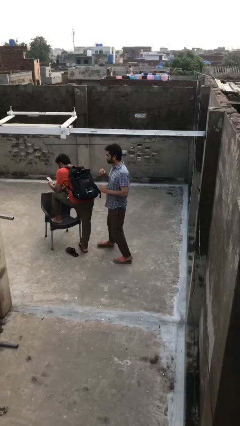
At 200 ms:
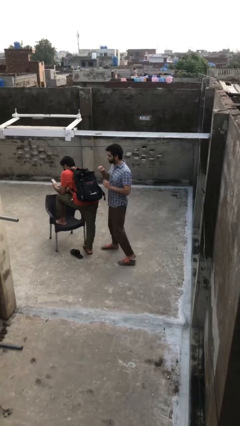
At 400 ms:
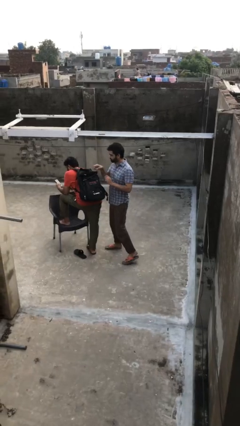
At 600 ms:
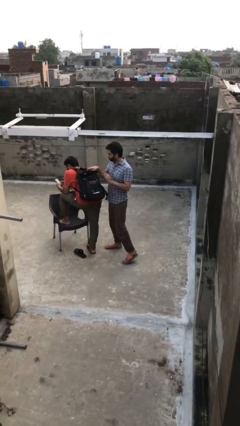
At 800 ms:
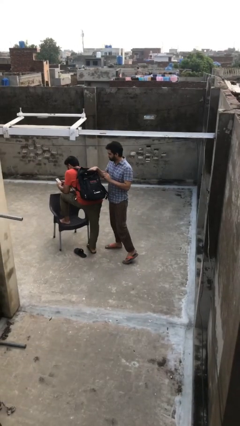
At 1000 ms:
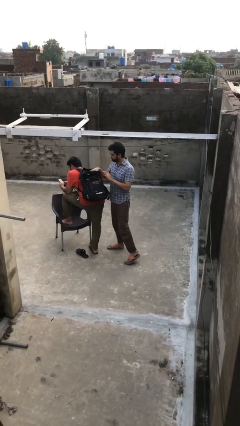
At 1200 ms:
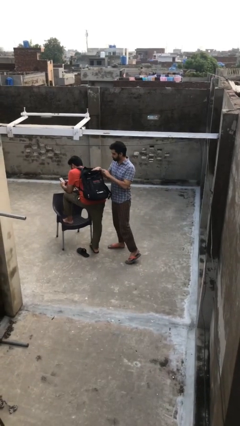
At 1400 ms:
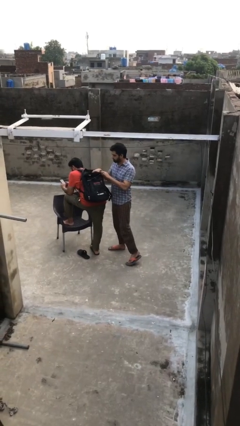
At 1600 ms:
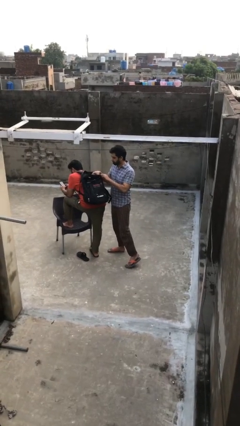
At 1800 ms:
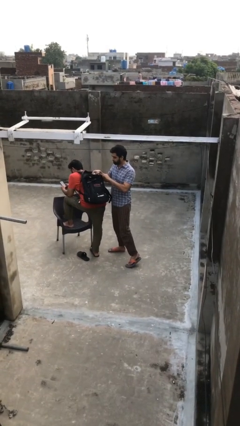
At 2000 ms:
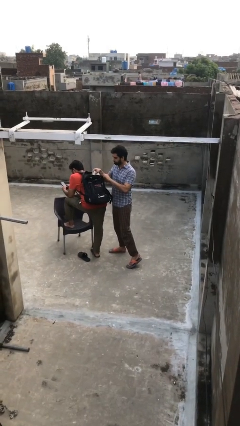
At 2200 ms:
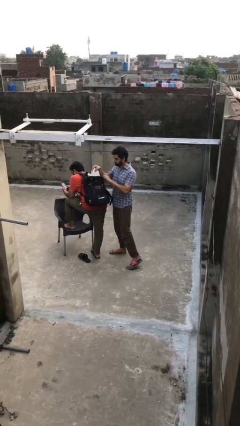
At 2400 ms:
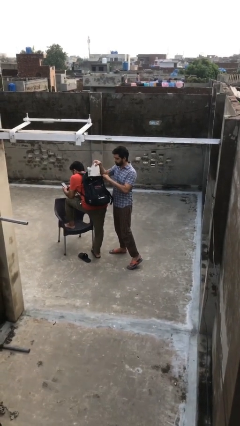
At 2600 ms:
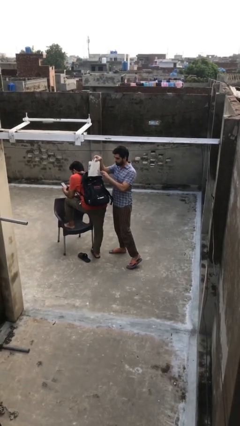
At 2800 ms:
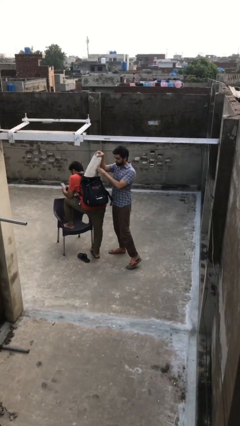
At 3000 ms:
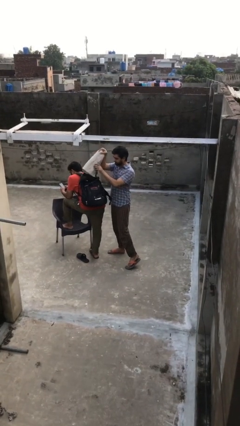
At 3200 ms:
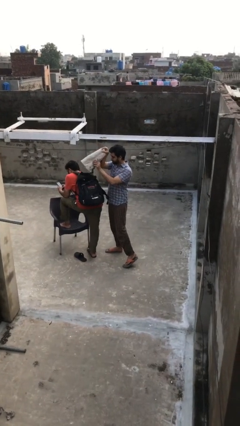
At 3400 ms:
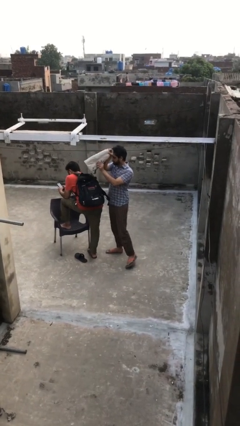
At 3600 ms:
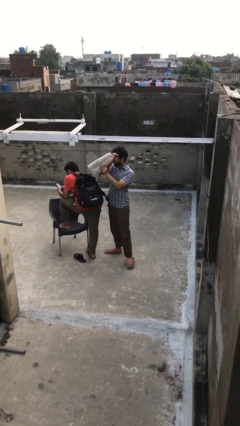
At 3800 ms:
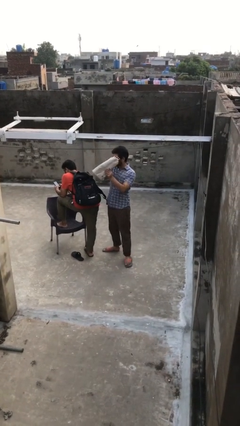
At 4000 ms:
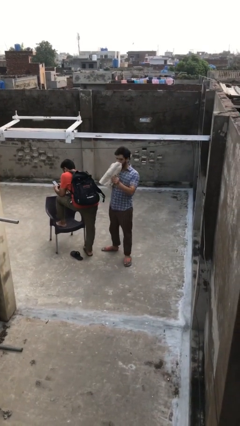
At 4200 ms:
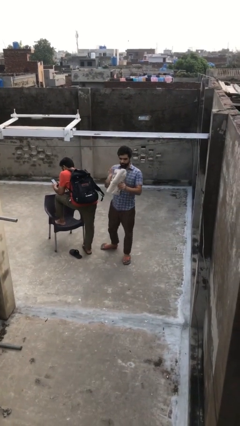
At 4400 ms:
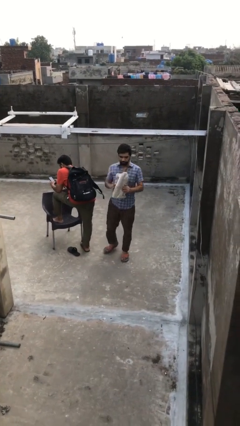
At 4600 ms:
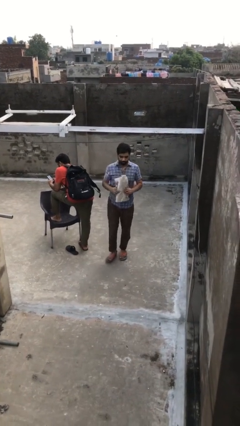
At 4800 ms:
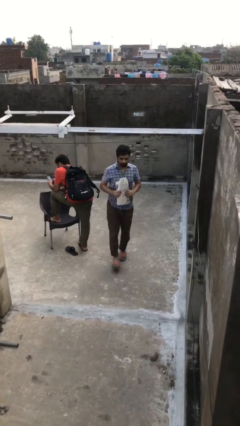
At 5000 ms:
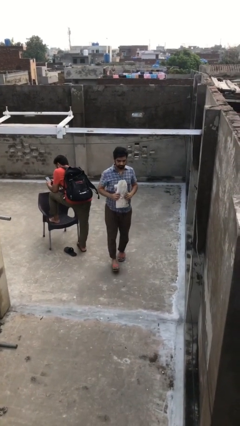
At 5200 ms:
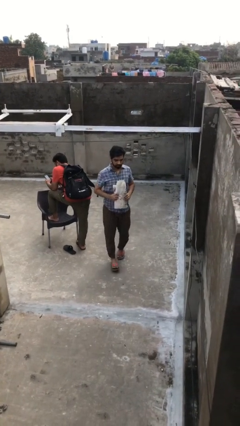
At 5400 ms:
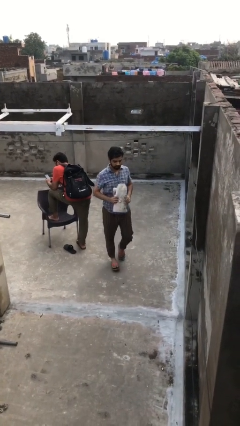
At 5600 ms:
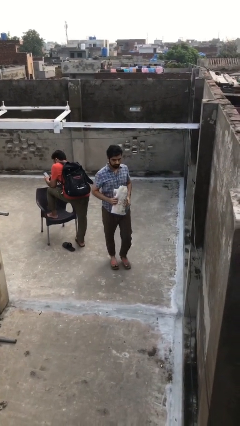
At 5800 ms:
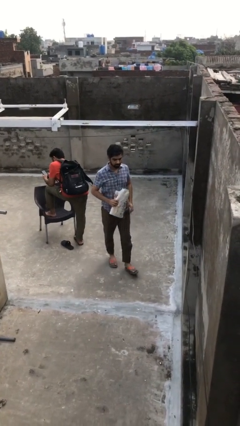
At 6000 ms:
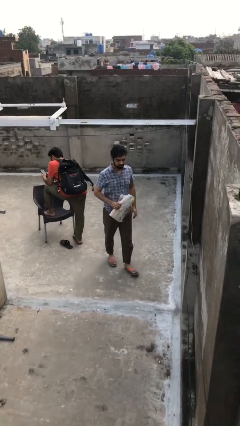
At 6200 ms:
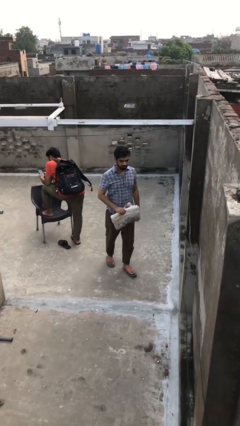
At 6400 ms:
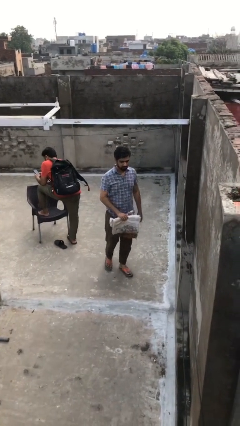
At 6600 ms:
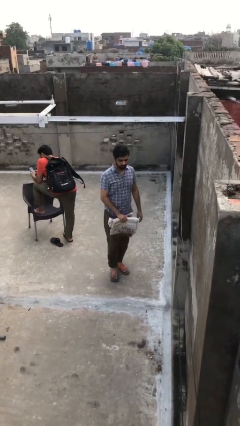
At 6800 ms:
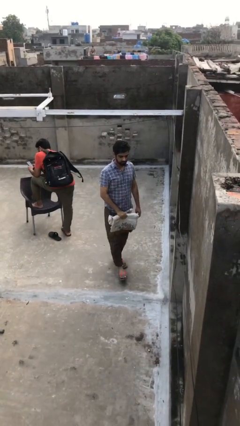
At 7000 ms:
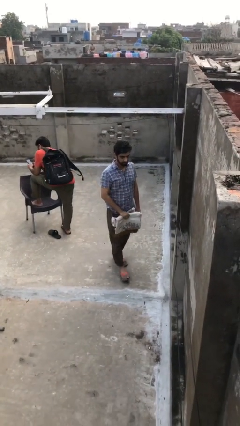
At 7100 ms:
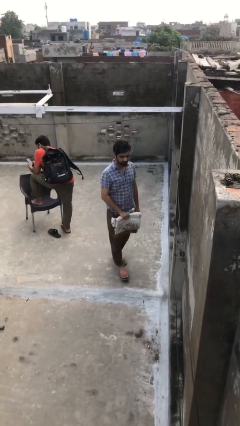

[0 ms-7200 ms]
person steals object from person

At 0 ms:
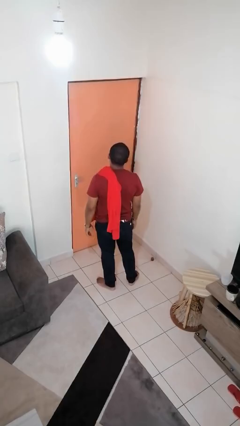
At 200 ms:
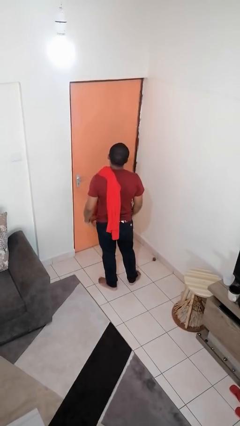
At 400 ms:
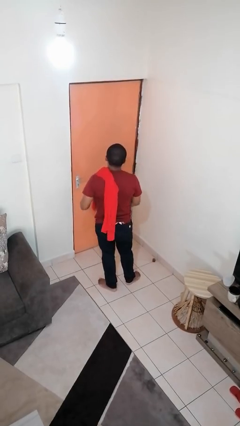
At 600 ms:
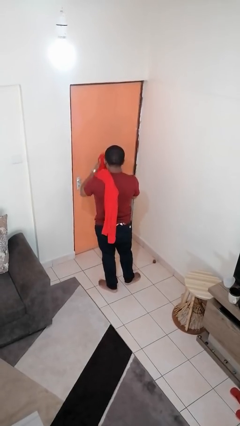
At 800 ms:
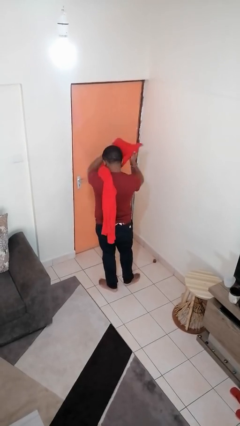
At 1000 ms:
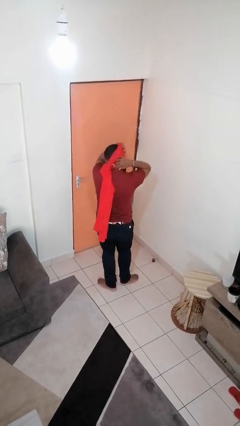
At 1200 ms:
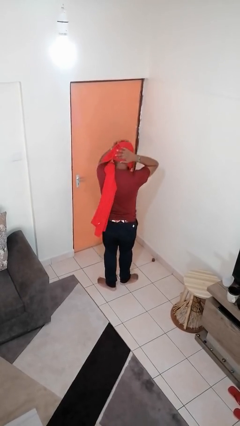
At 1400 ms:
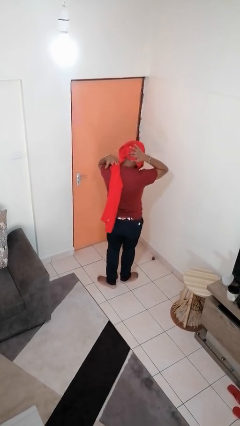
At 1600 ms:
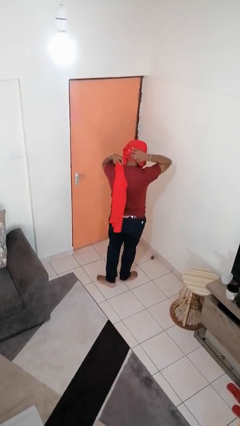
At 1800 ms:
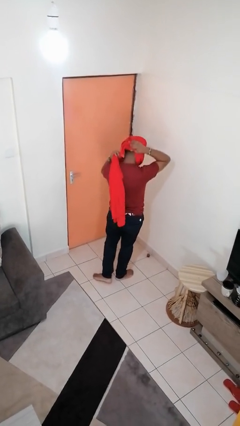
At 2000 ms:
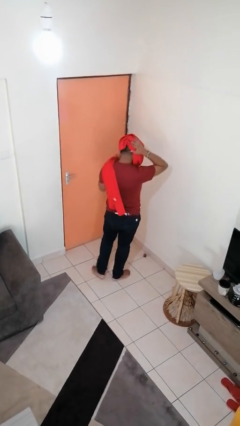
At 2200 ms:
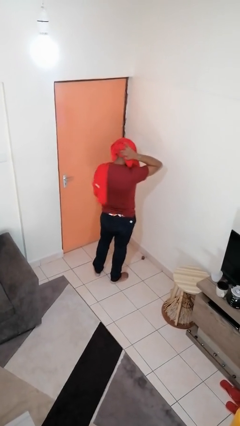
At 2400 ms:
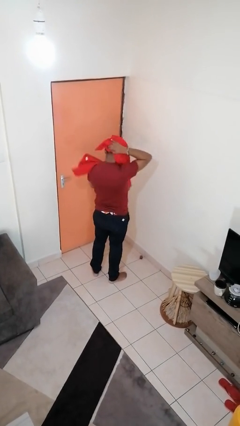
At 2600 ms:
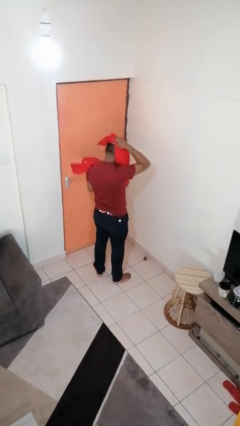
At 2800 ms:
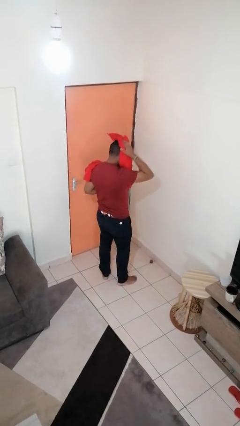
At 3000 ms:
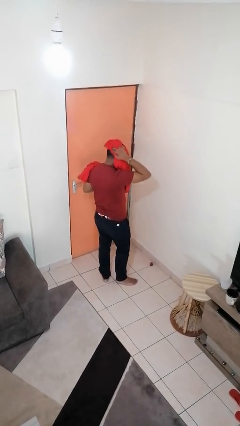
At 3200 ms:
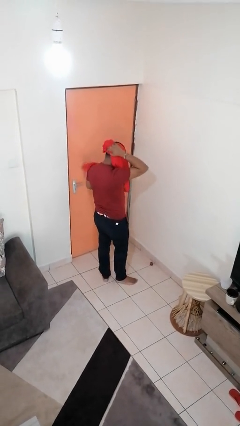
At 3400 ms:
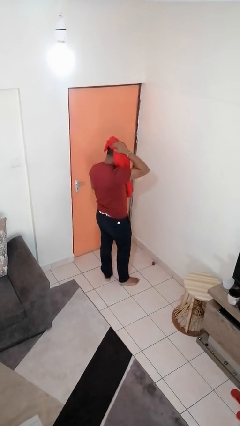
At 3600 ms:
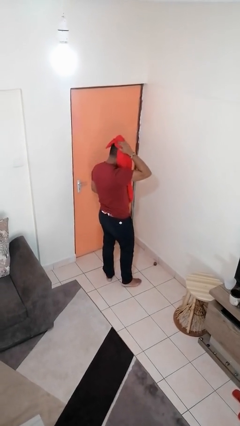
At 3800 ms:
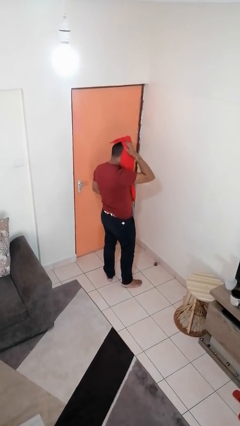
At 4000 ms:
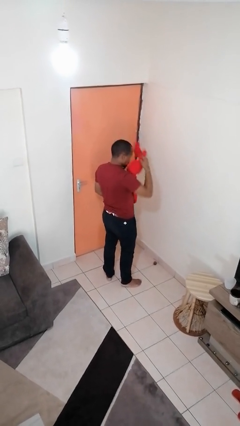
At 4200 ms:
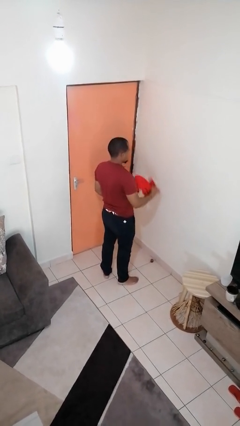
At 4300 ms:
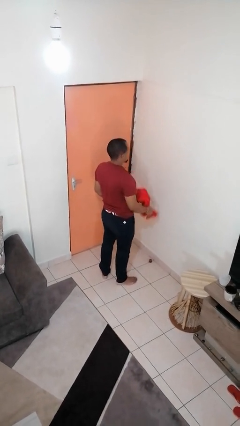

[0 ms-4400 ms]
person dries hair with towel

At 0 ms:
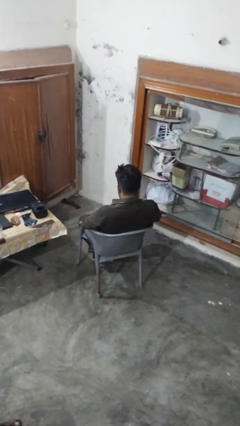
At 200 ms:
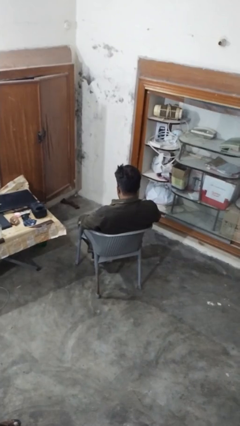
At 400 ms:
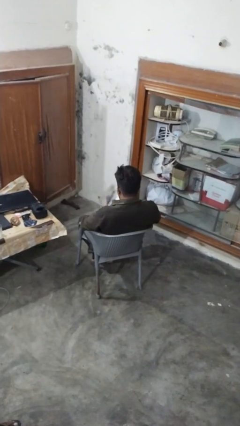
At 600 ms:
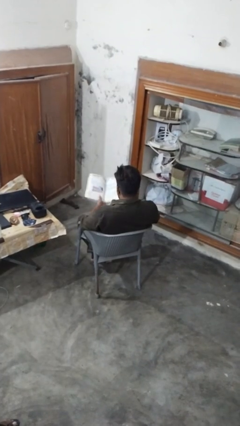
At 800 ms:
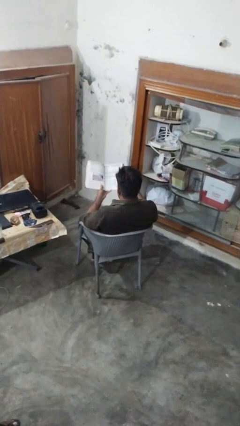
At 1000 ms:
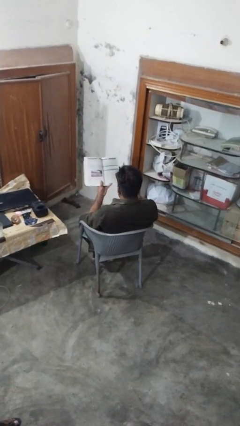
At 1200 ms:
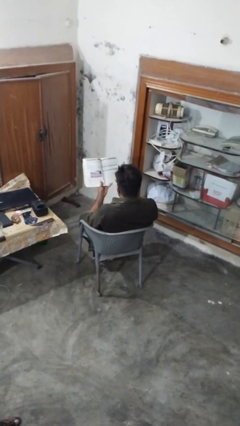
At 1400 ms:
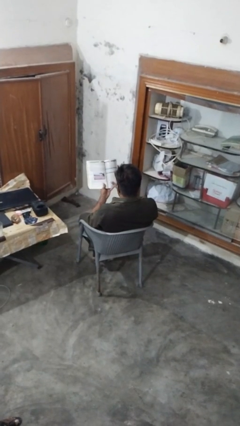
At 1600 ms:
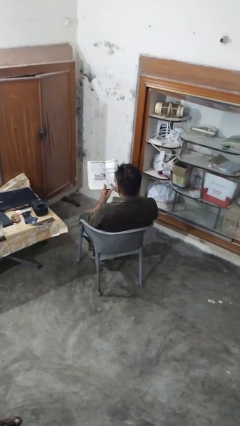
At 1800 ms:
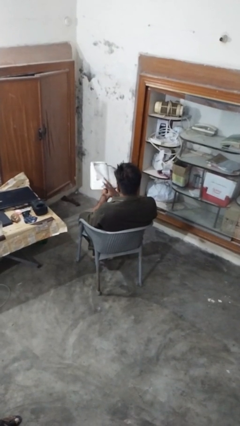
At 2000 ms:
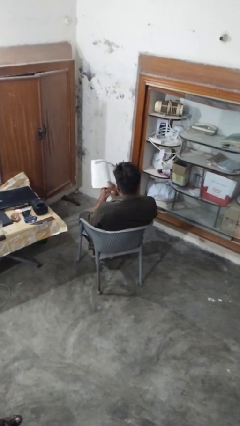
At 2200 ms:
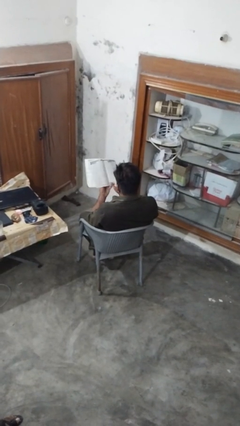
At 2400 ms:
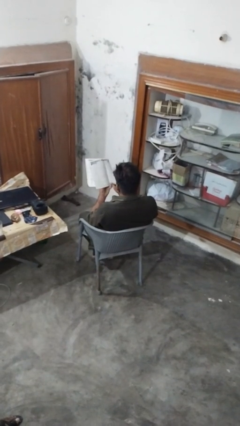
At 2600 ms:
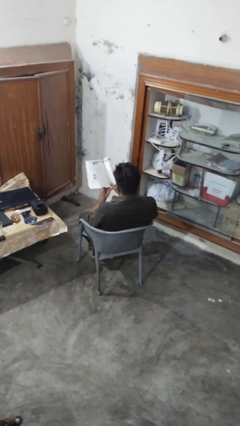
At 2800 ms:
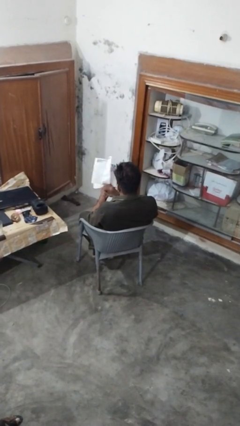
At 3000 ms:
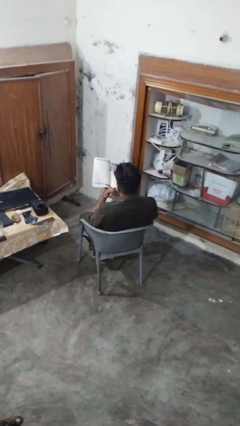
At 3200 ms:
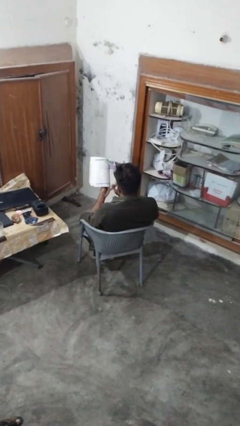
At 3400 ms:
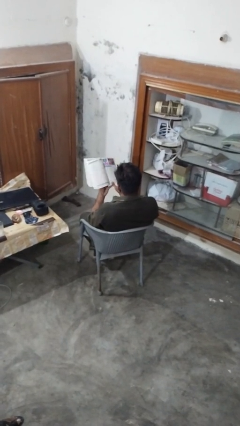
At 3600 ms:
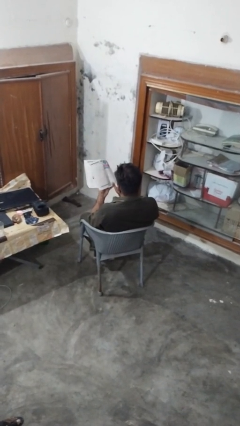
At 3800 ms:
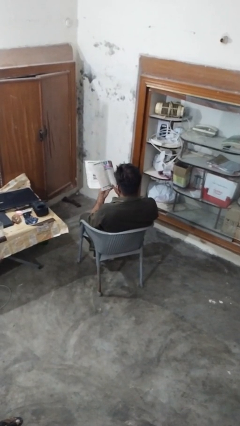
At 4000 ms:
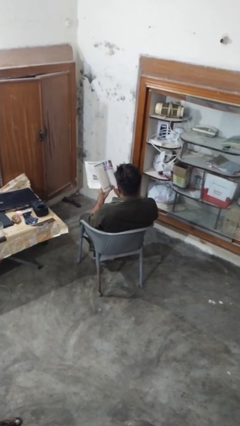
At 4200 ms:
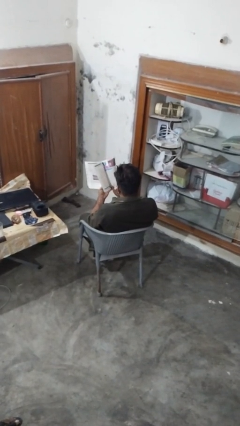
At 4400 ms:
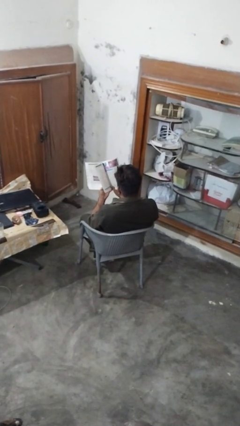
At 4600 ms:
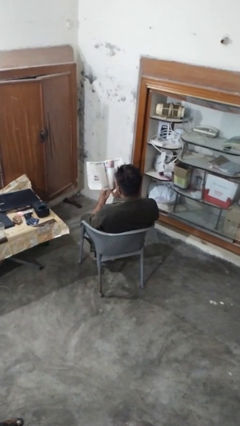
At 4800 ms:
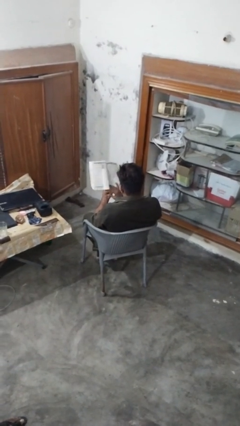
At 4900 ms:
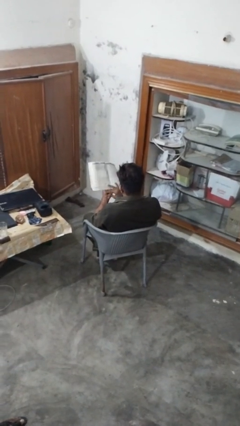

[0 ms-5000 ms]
person reads book

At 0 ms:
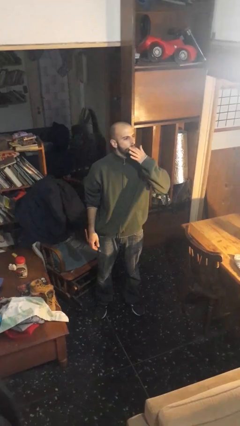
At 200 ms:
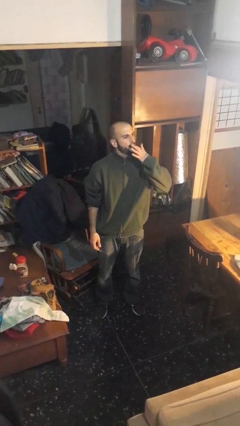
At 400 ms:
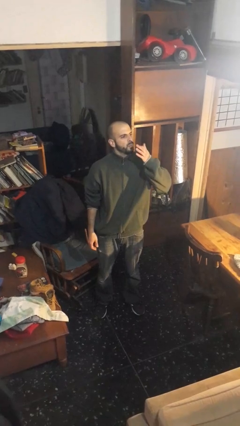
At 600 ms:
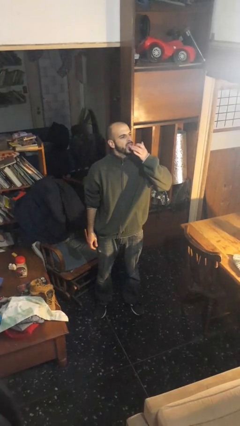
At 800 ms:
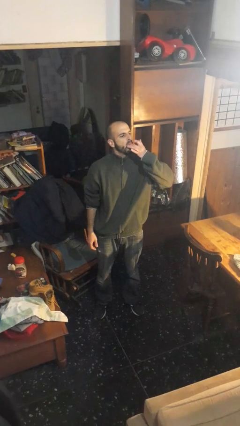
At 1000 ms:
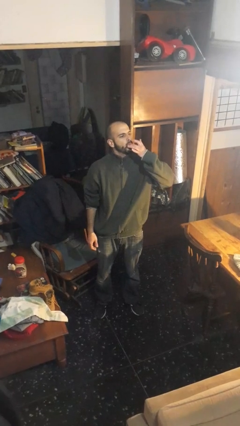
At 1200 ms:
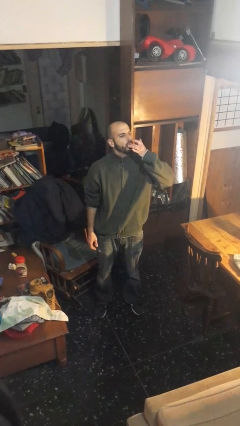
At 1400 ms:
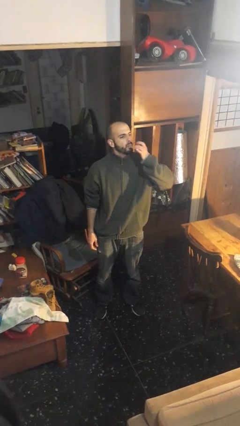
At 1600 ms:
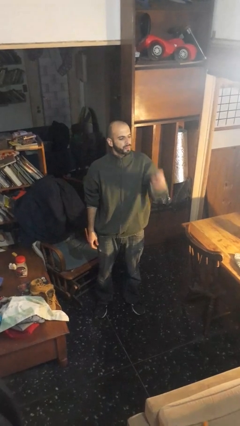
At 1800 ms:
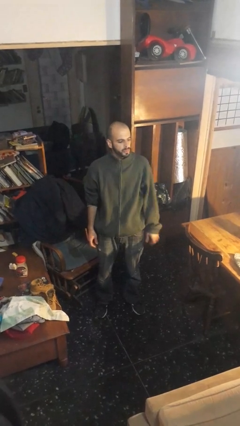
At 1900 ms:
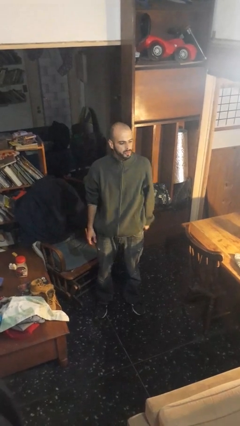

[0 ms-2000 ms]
person licks fingers
